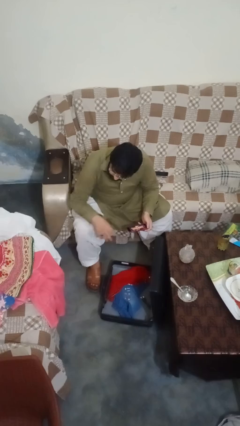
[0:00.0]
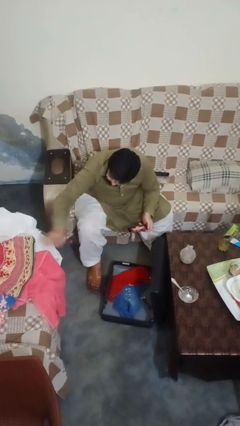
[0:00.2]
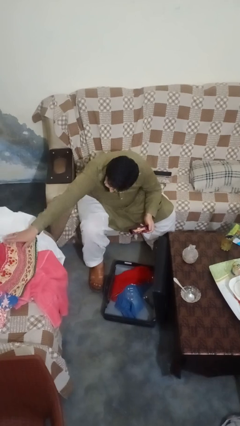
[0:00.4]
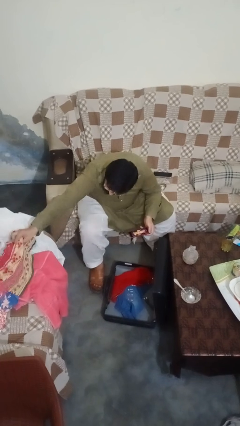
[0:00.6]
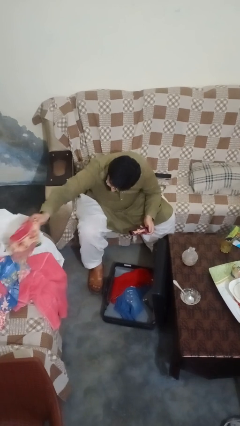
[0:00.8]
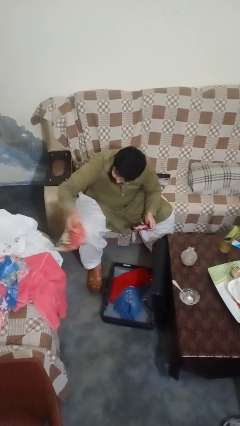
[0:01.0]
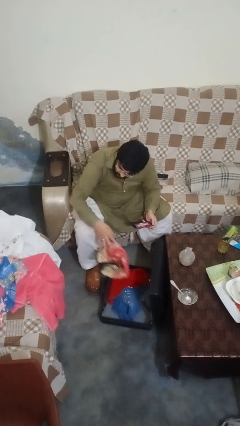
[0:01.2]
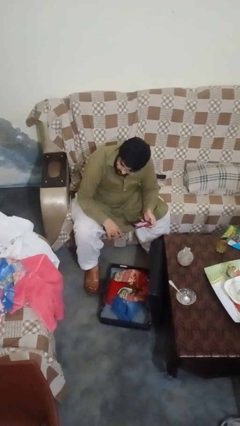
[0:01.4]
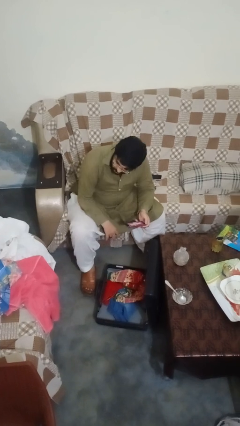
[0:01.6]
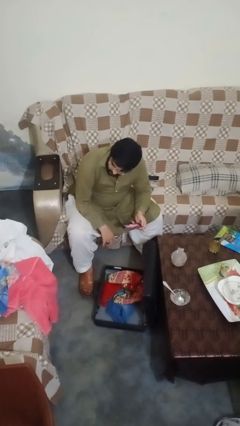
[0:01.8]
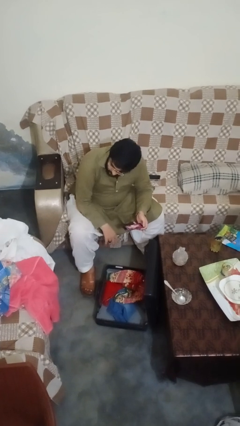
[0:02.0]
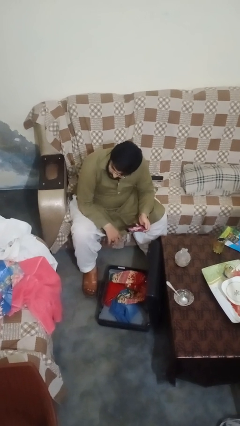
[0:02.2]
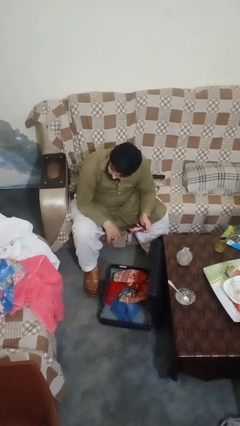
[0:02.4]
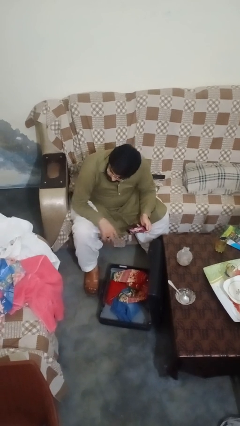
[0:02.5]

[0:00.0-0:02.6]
person loads clothes into suitcase

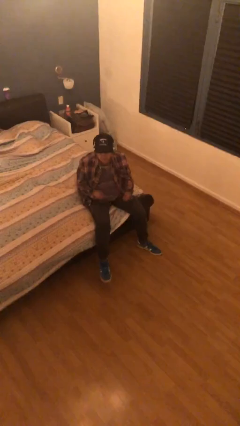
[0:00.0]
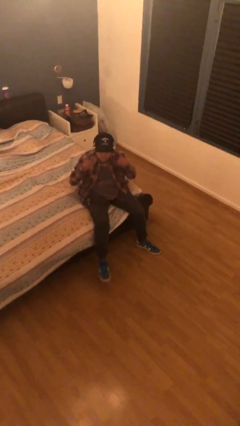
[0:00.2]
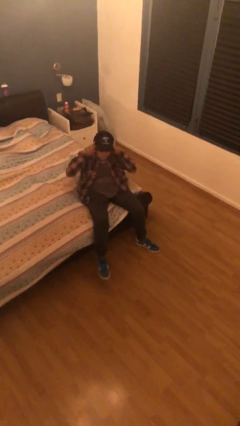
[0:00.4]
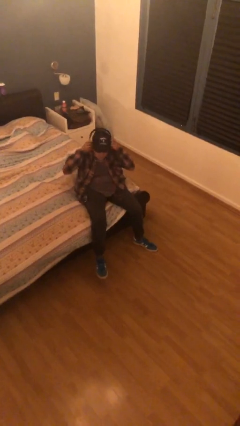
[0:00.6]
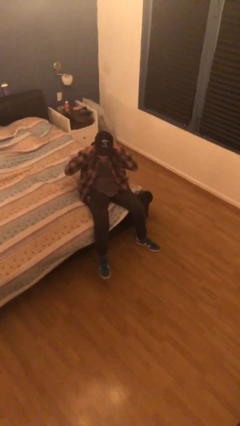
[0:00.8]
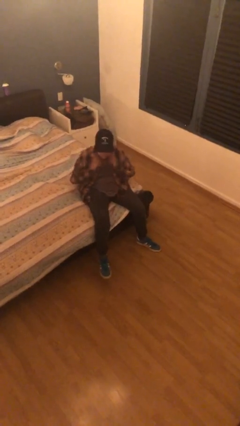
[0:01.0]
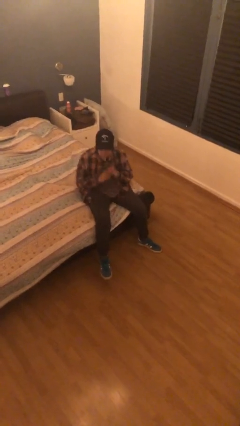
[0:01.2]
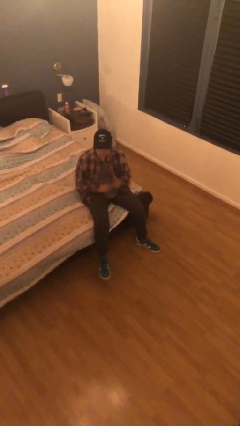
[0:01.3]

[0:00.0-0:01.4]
person takes off headphones

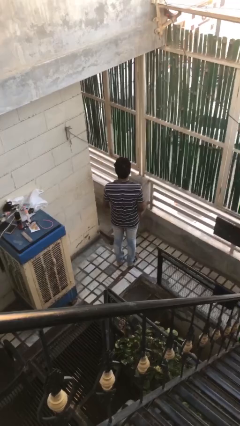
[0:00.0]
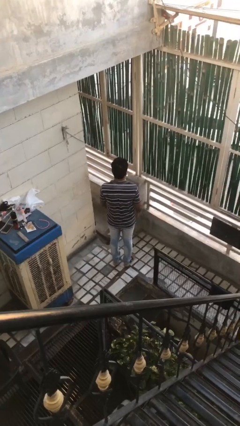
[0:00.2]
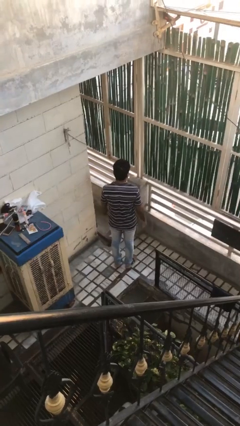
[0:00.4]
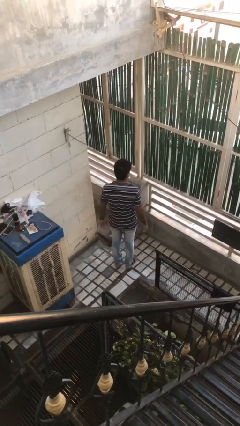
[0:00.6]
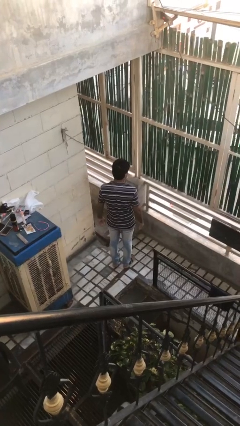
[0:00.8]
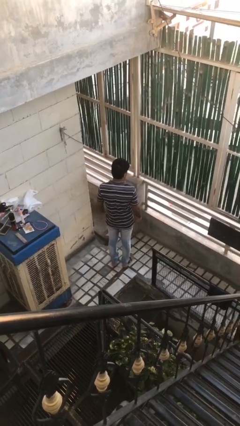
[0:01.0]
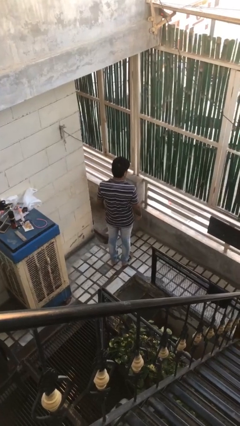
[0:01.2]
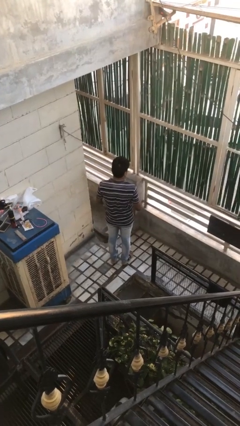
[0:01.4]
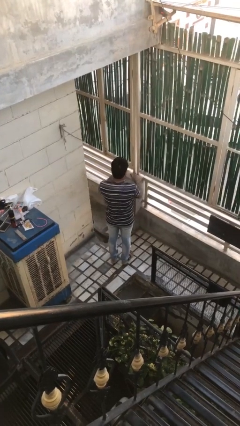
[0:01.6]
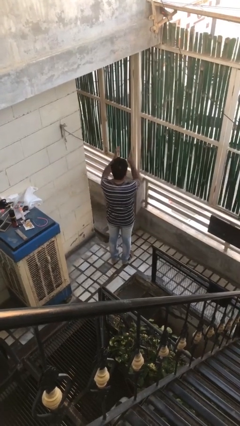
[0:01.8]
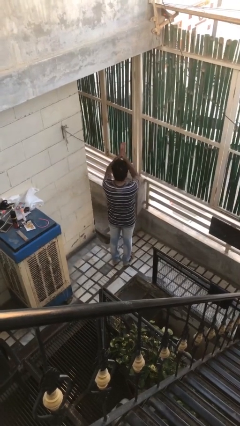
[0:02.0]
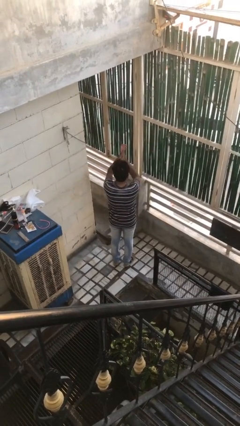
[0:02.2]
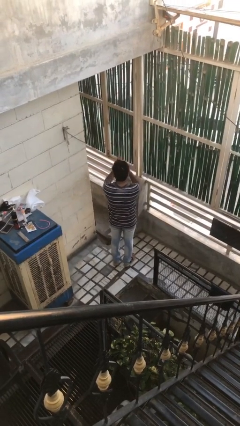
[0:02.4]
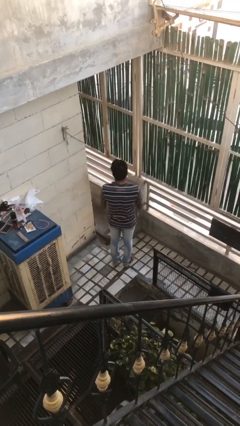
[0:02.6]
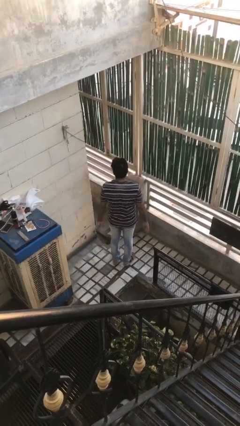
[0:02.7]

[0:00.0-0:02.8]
person claps hands

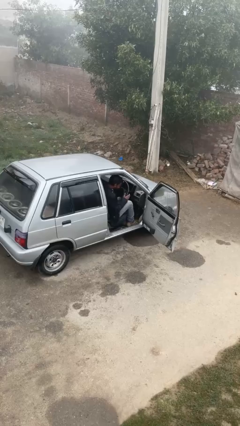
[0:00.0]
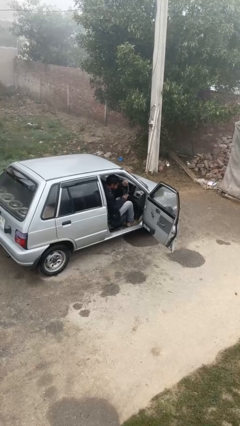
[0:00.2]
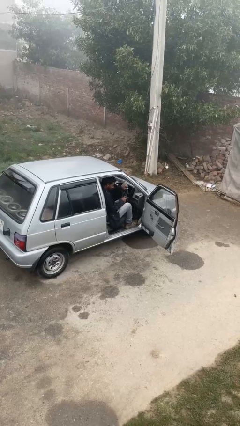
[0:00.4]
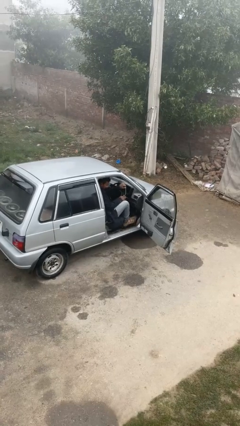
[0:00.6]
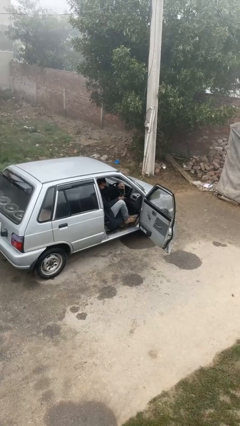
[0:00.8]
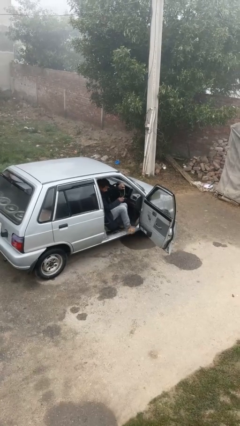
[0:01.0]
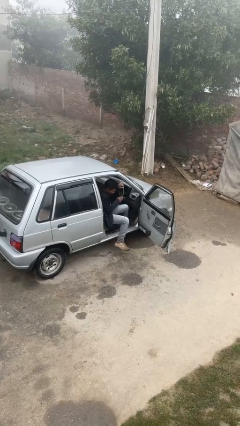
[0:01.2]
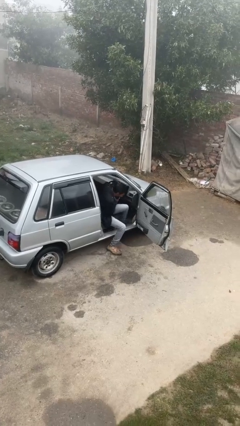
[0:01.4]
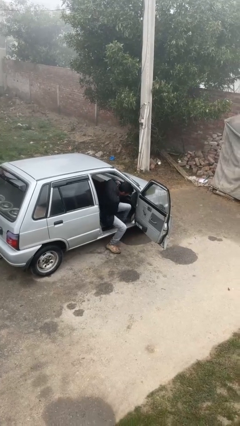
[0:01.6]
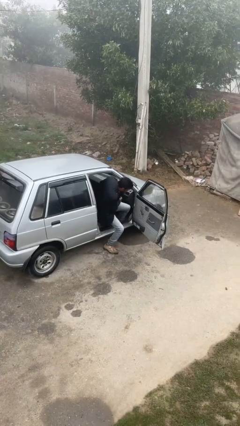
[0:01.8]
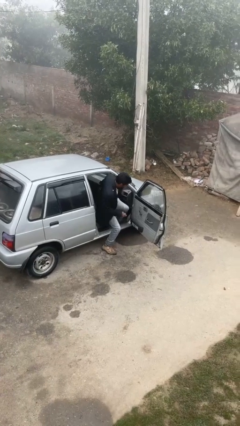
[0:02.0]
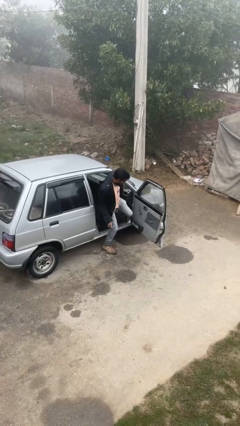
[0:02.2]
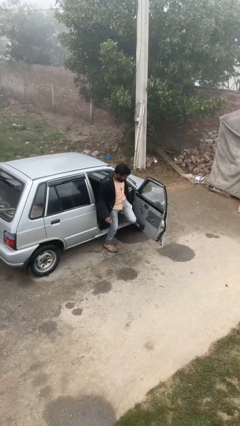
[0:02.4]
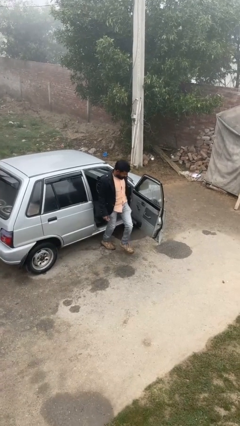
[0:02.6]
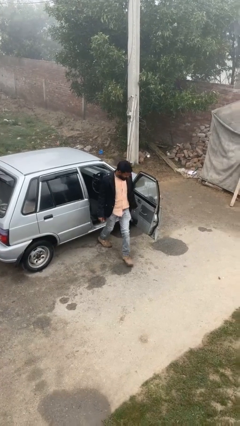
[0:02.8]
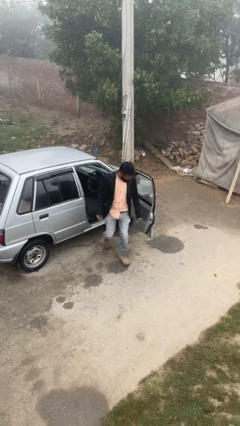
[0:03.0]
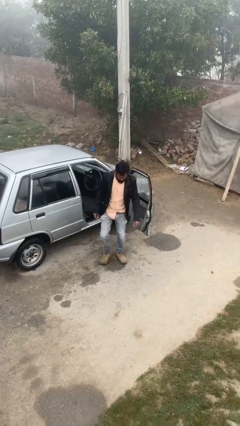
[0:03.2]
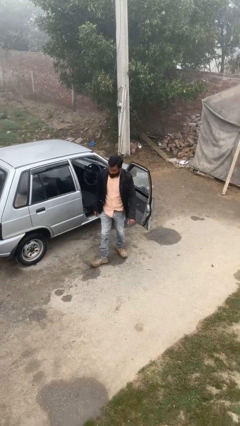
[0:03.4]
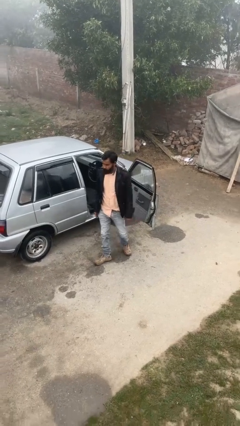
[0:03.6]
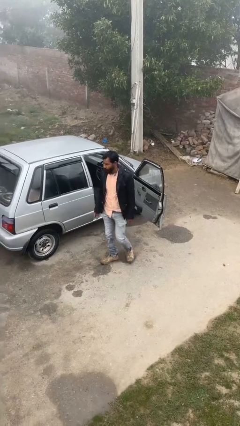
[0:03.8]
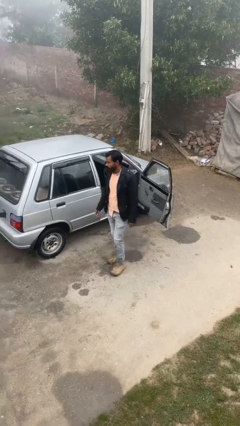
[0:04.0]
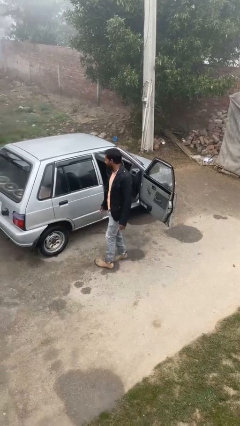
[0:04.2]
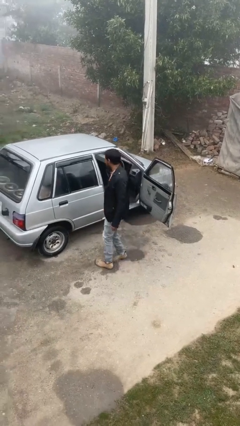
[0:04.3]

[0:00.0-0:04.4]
person exits car

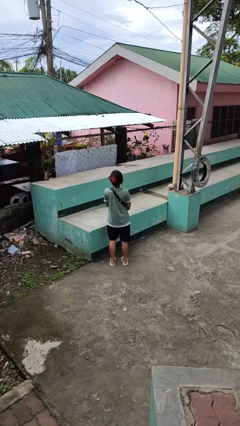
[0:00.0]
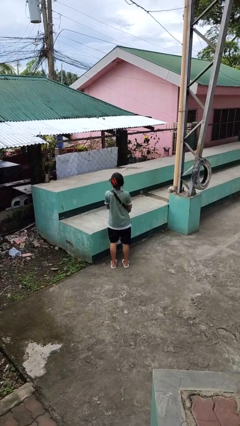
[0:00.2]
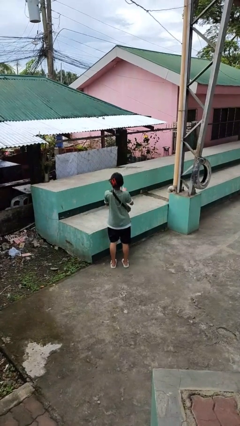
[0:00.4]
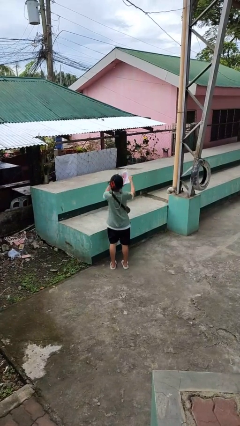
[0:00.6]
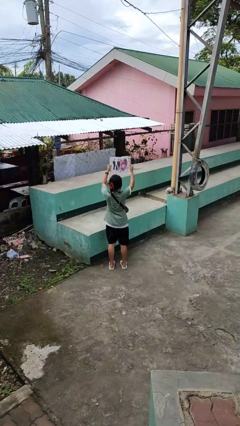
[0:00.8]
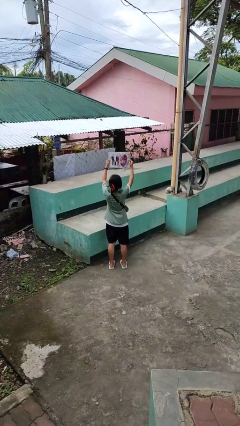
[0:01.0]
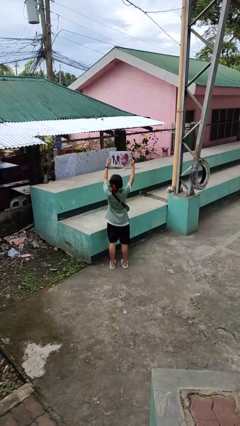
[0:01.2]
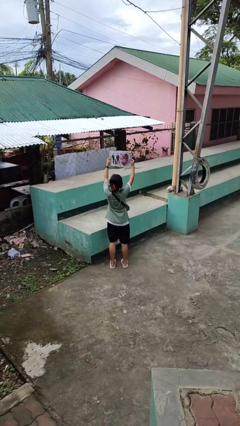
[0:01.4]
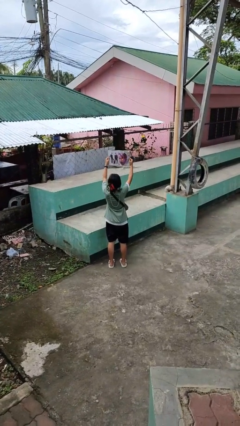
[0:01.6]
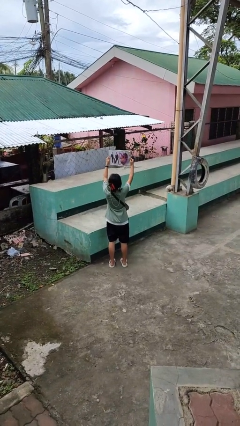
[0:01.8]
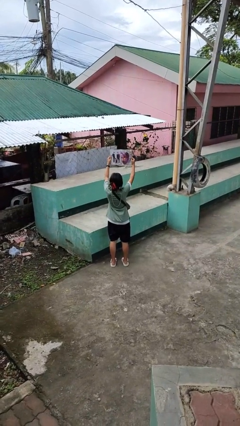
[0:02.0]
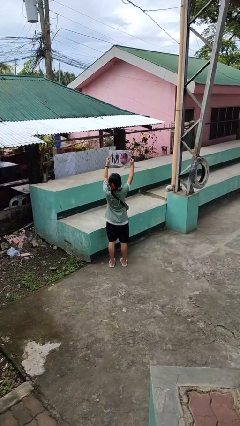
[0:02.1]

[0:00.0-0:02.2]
person reads magazine

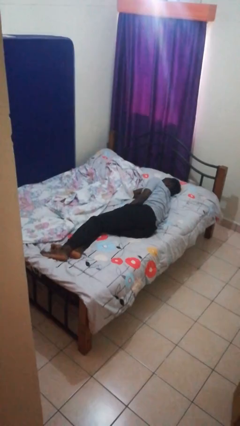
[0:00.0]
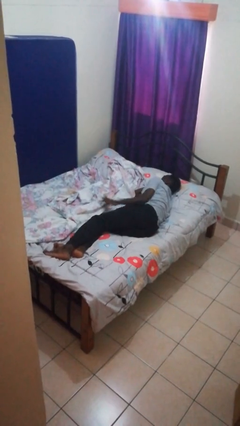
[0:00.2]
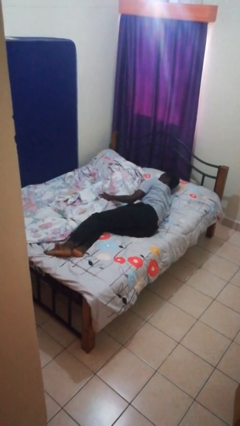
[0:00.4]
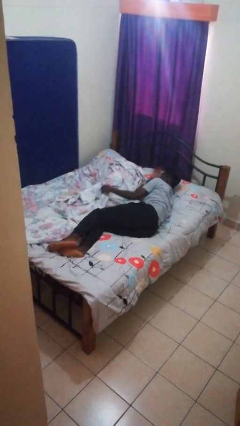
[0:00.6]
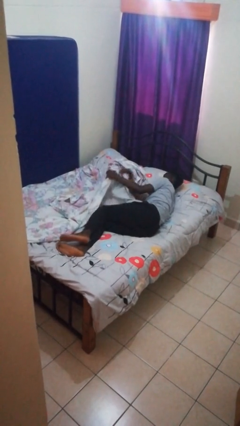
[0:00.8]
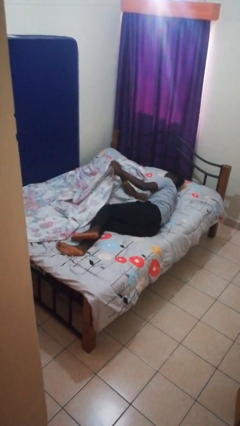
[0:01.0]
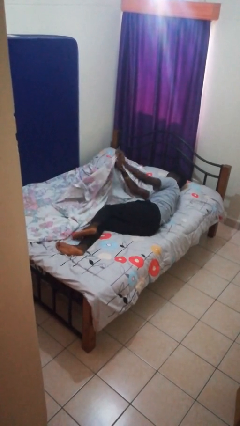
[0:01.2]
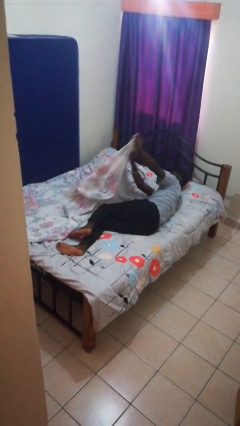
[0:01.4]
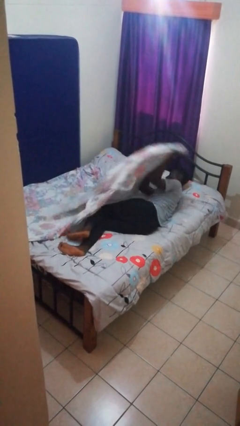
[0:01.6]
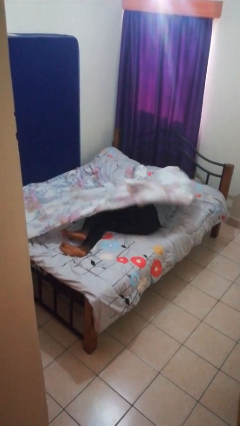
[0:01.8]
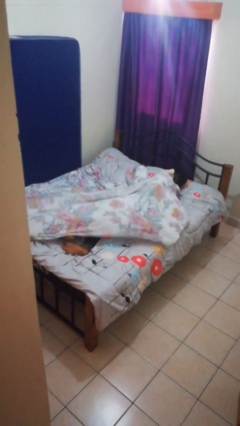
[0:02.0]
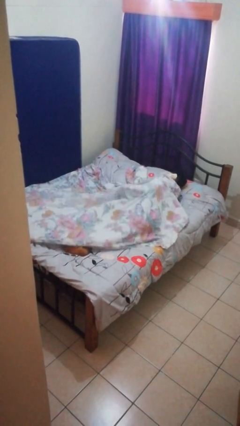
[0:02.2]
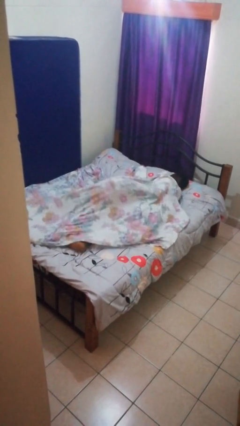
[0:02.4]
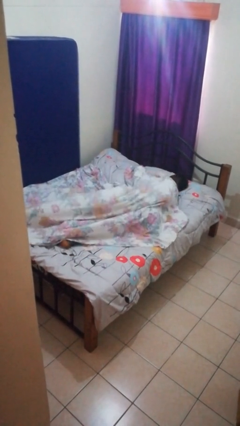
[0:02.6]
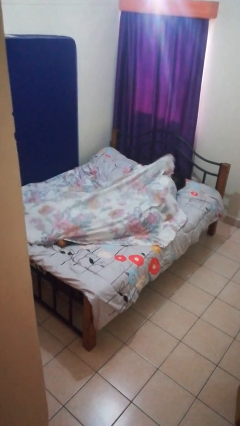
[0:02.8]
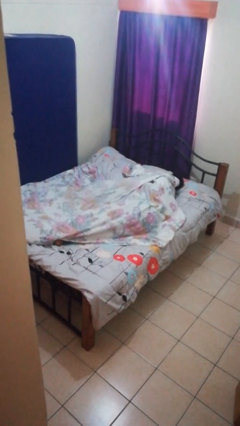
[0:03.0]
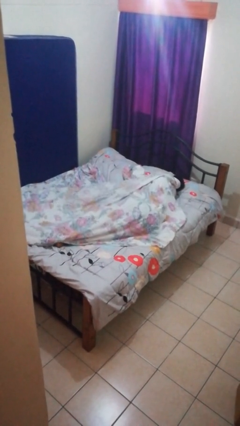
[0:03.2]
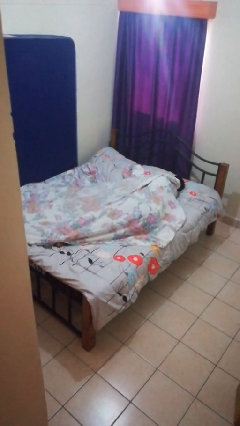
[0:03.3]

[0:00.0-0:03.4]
person covers with bedsheets

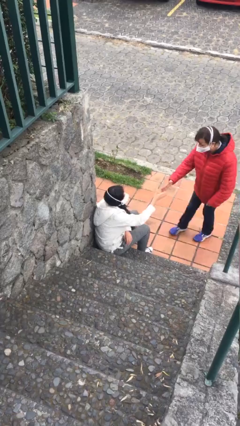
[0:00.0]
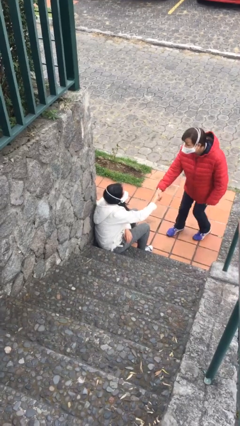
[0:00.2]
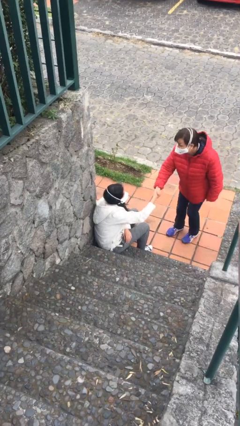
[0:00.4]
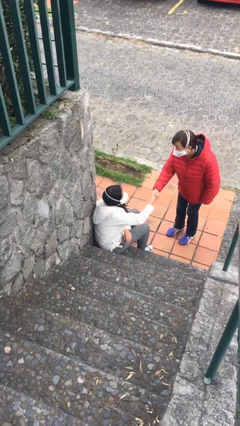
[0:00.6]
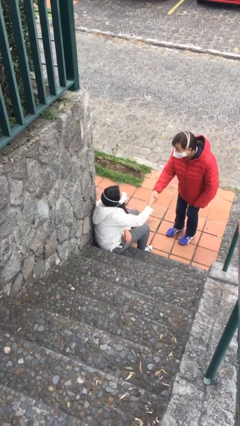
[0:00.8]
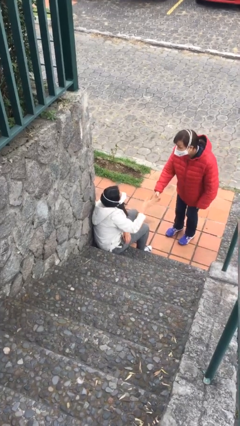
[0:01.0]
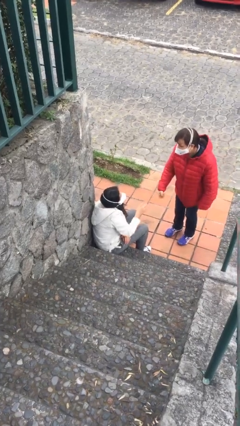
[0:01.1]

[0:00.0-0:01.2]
person shakes hand
